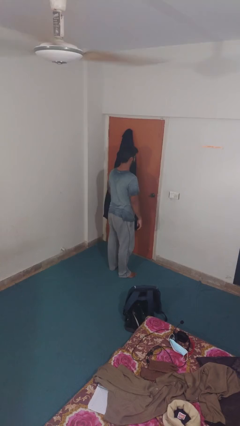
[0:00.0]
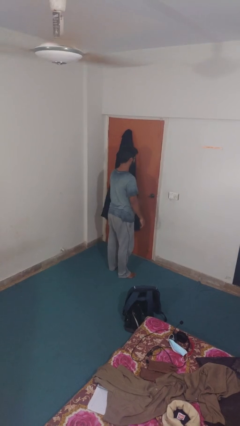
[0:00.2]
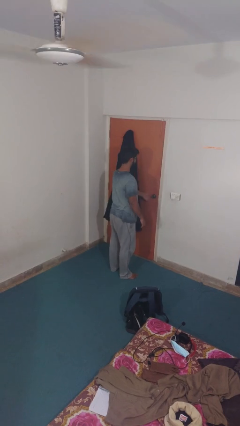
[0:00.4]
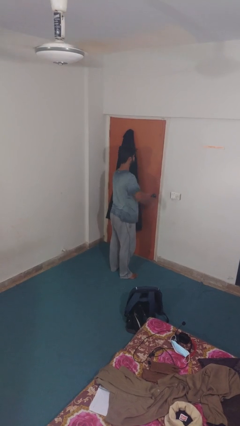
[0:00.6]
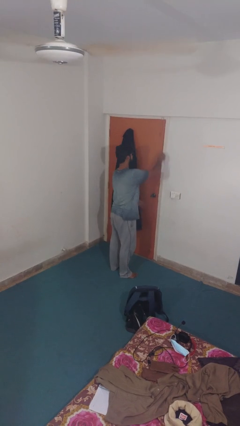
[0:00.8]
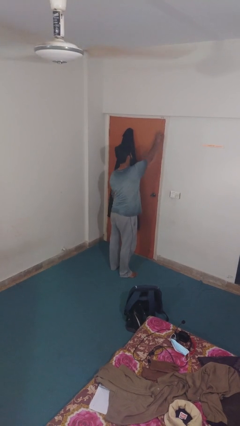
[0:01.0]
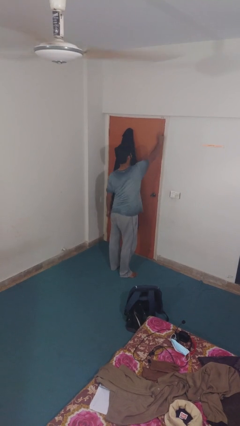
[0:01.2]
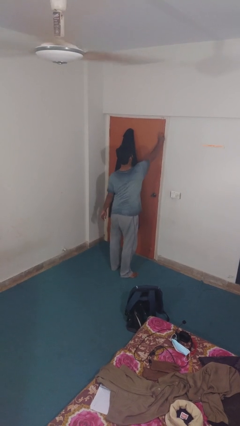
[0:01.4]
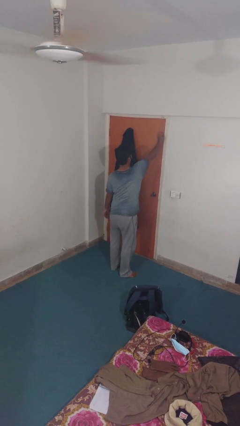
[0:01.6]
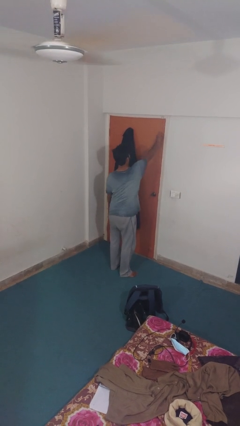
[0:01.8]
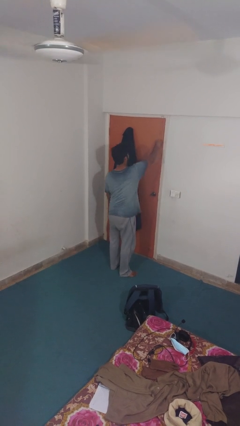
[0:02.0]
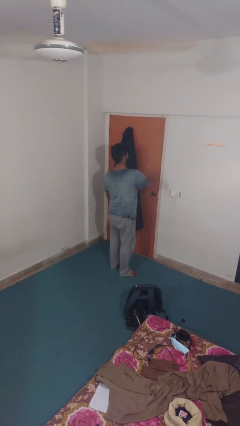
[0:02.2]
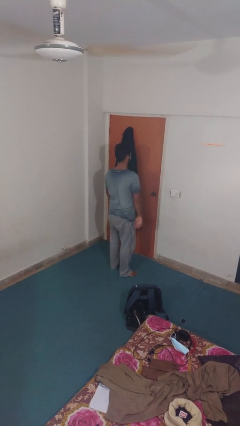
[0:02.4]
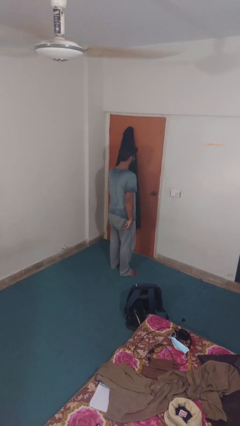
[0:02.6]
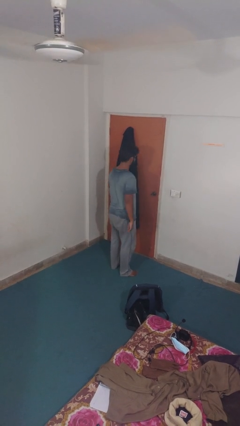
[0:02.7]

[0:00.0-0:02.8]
person unlocks door with keys

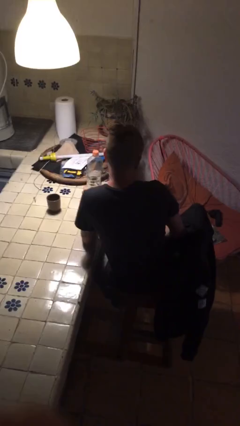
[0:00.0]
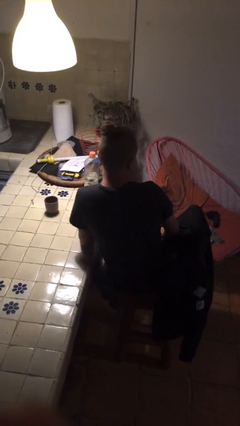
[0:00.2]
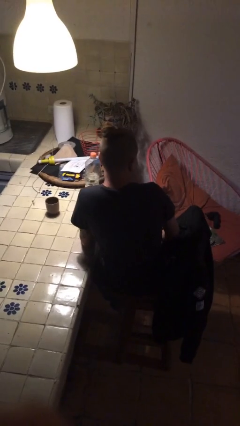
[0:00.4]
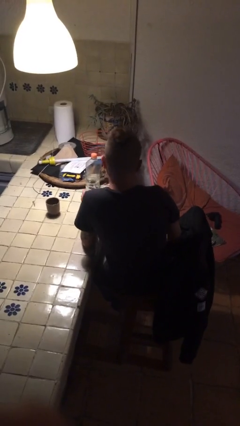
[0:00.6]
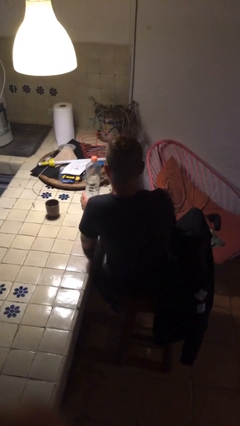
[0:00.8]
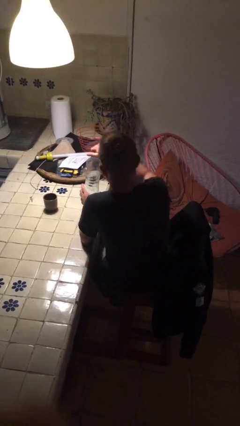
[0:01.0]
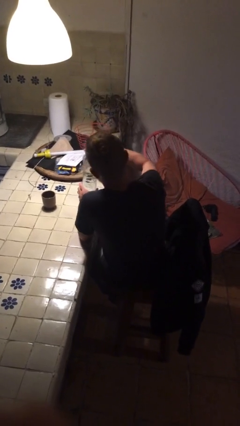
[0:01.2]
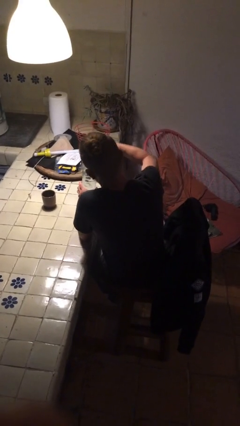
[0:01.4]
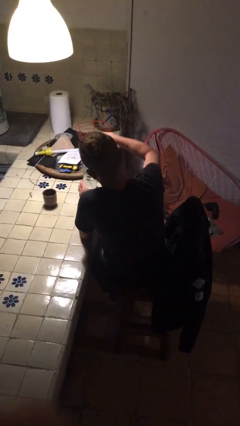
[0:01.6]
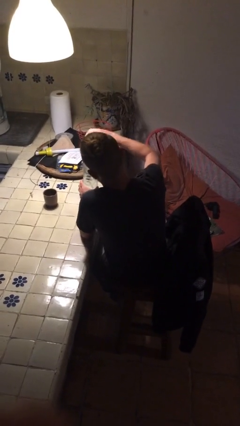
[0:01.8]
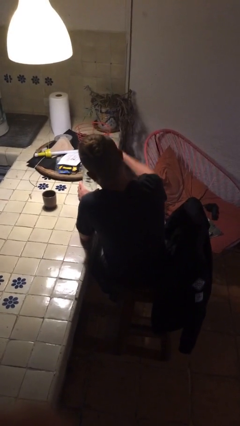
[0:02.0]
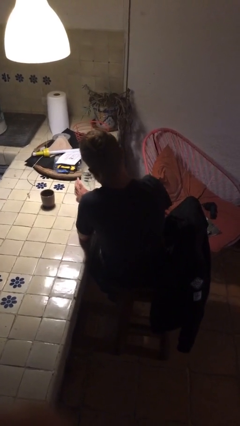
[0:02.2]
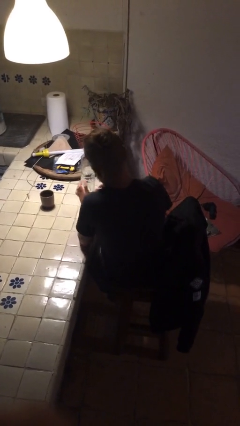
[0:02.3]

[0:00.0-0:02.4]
person unscrews lid from bottle

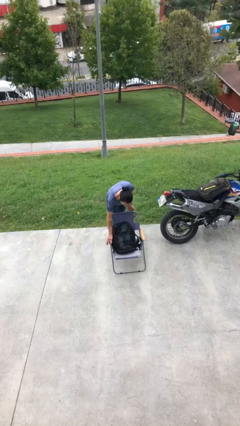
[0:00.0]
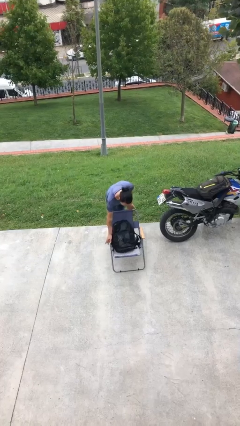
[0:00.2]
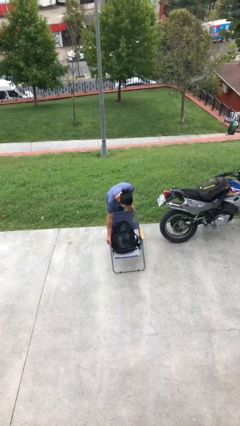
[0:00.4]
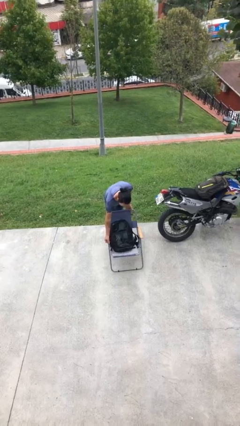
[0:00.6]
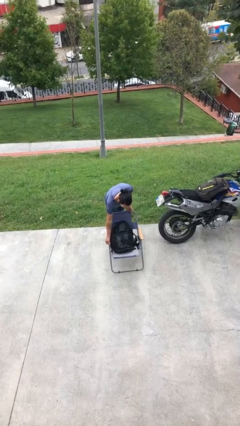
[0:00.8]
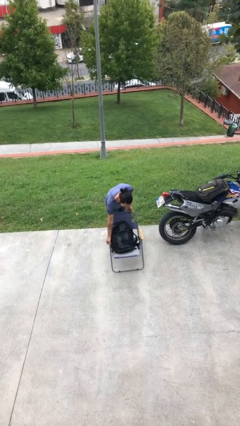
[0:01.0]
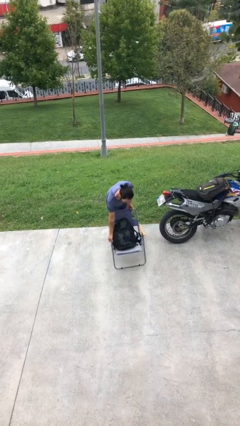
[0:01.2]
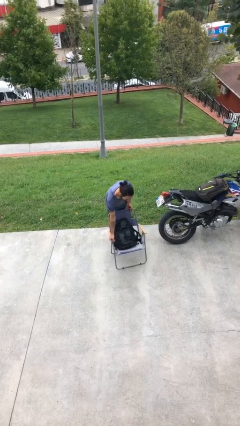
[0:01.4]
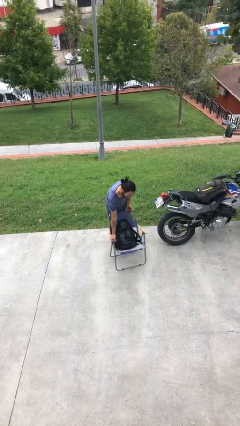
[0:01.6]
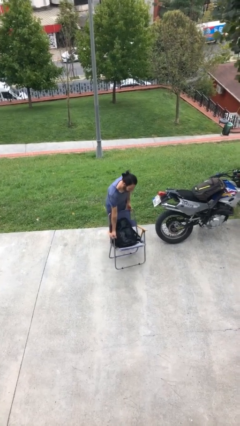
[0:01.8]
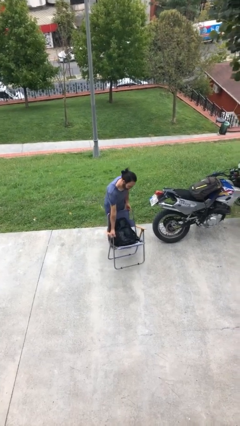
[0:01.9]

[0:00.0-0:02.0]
person picks up object from floor

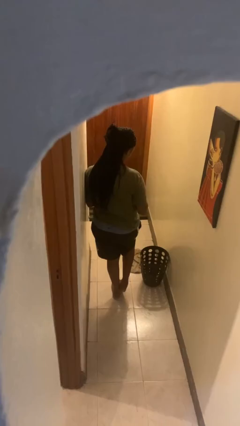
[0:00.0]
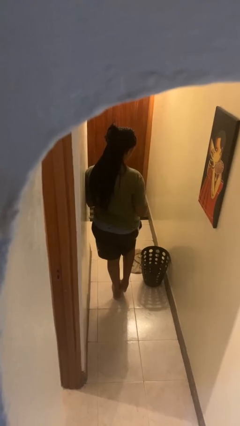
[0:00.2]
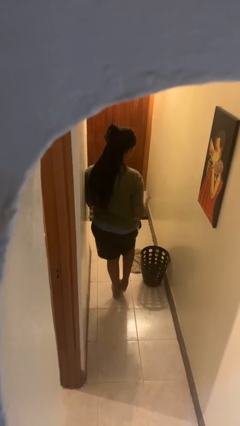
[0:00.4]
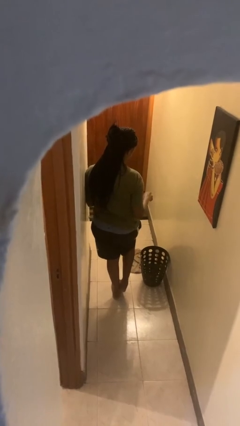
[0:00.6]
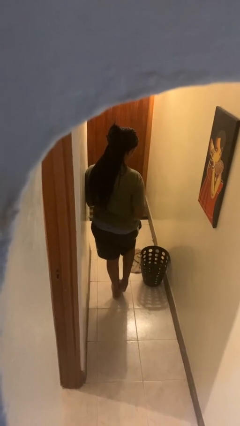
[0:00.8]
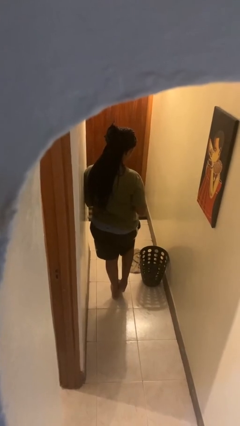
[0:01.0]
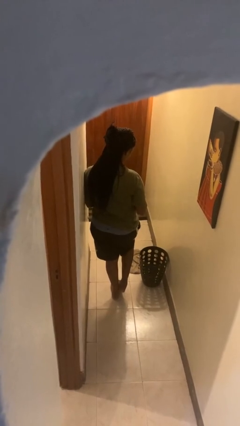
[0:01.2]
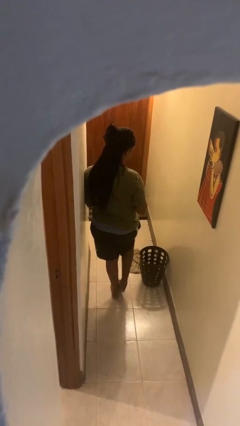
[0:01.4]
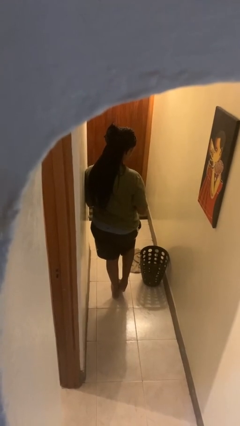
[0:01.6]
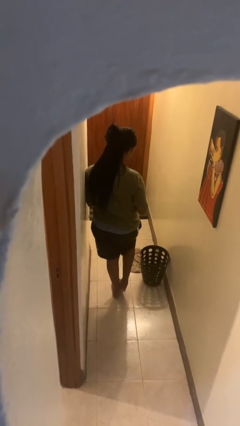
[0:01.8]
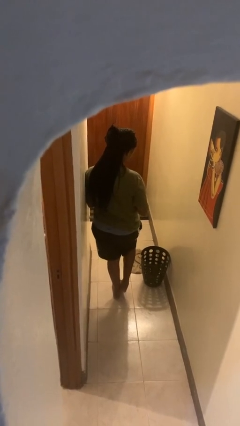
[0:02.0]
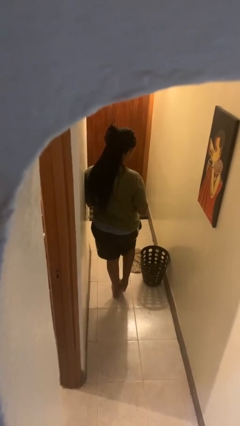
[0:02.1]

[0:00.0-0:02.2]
person discards trash

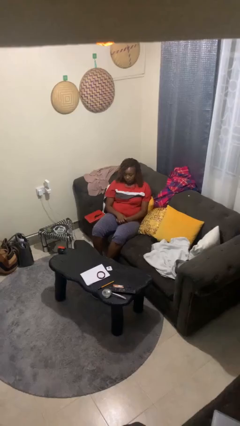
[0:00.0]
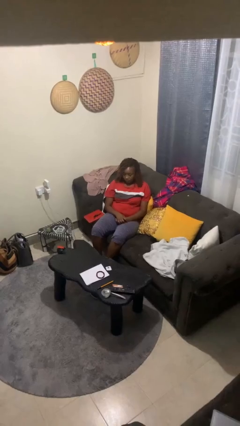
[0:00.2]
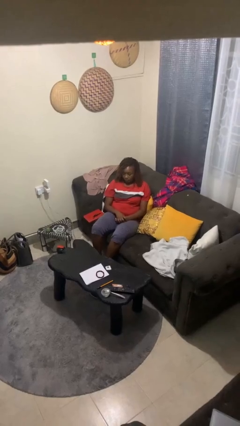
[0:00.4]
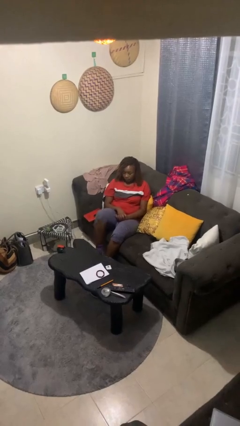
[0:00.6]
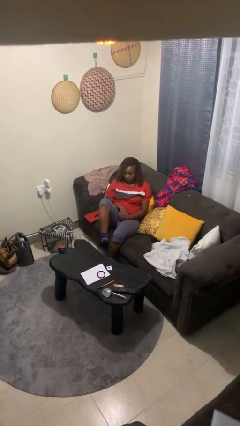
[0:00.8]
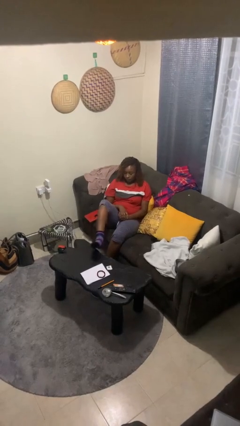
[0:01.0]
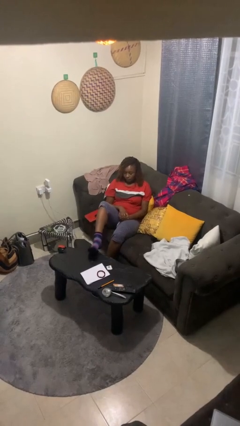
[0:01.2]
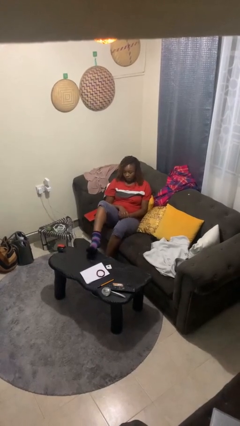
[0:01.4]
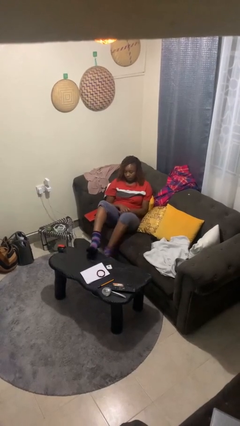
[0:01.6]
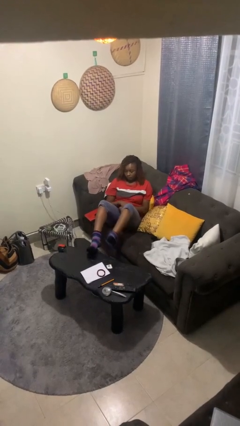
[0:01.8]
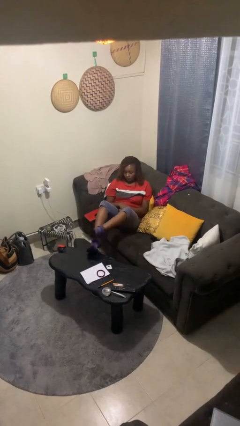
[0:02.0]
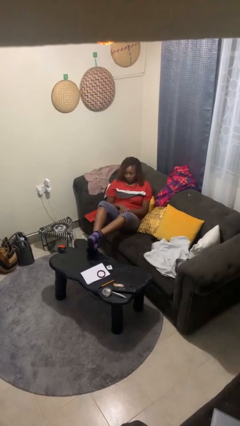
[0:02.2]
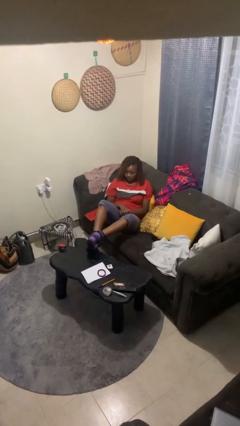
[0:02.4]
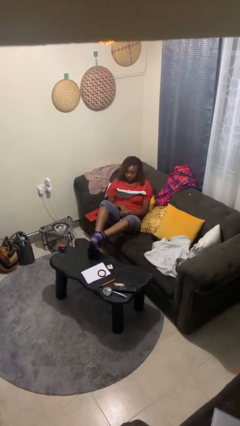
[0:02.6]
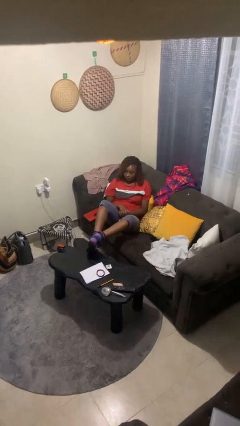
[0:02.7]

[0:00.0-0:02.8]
person puts feet up

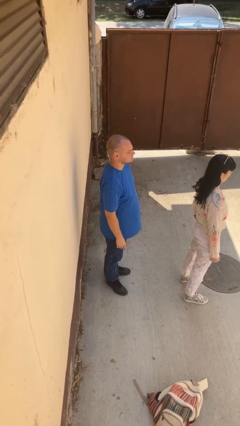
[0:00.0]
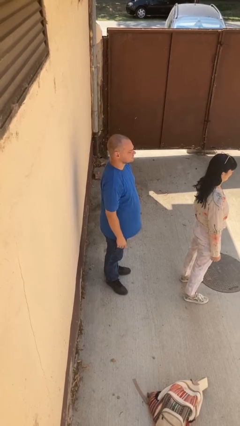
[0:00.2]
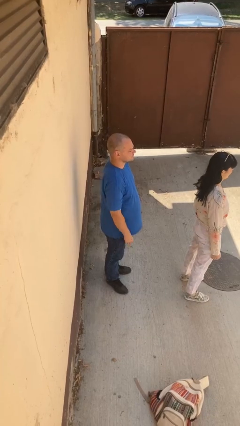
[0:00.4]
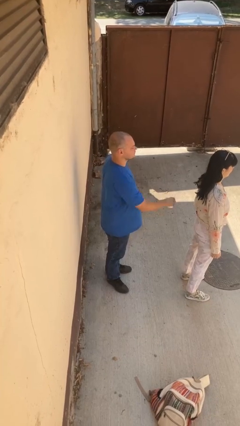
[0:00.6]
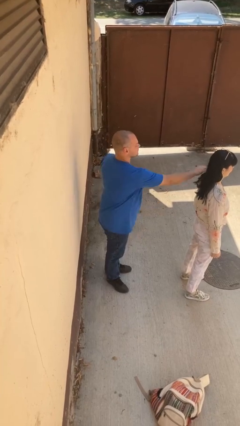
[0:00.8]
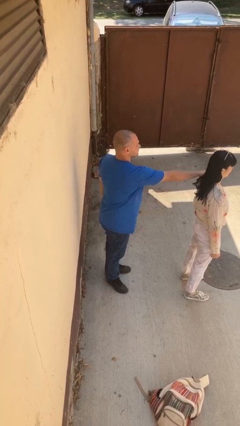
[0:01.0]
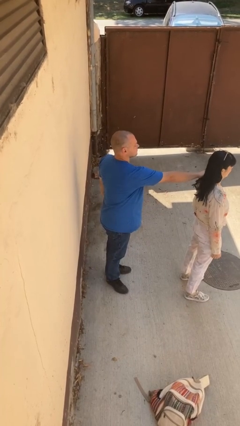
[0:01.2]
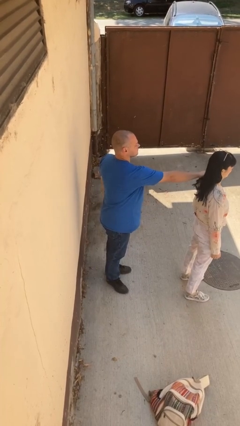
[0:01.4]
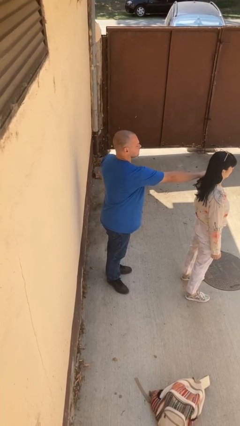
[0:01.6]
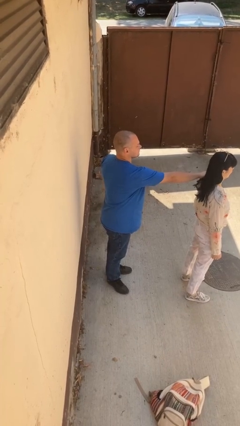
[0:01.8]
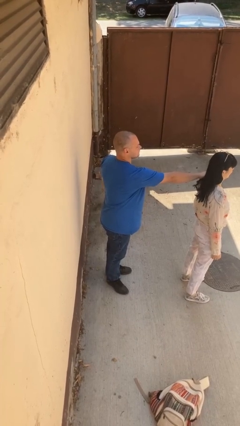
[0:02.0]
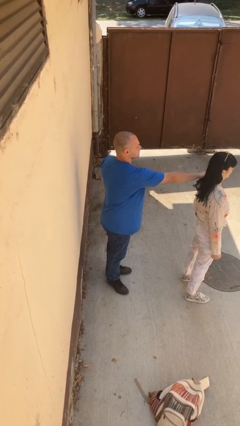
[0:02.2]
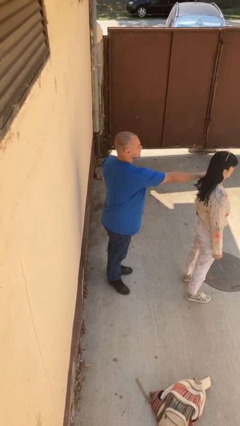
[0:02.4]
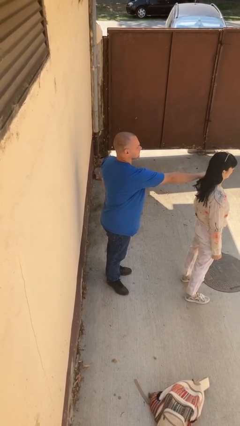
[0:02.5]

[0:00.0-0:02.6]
person grabs person by shoulder

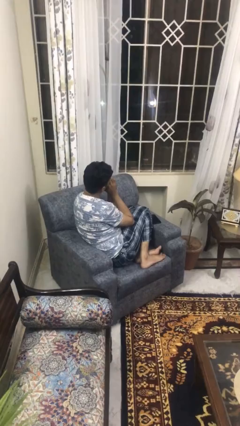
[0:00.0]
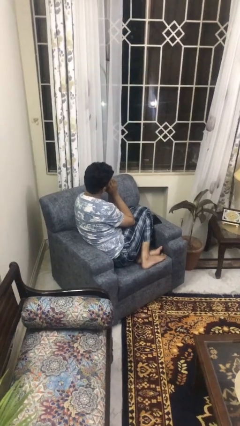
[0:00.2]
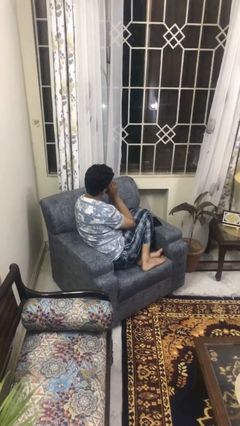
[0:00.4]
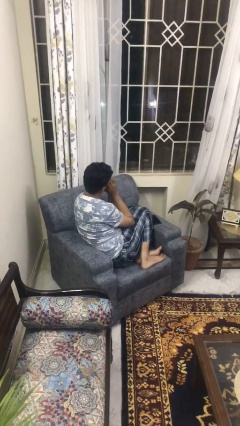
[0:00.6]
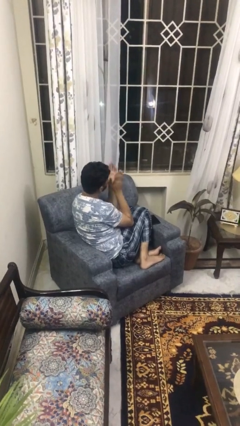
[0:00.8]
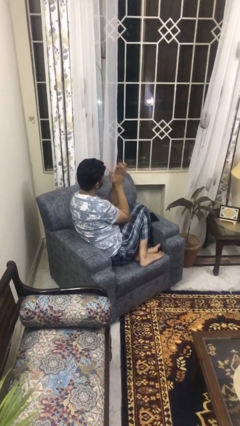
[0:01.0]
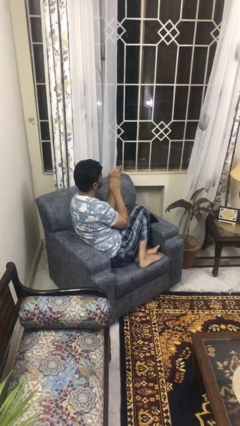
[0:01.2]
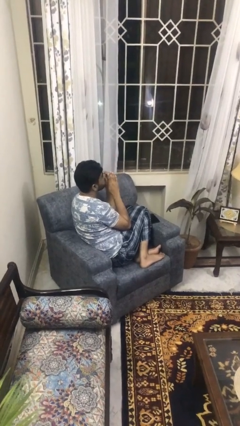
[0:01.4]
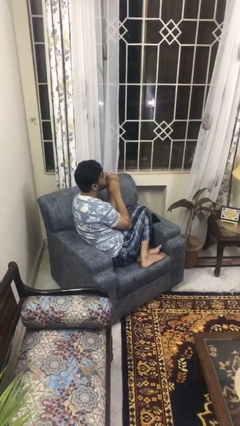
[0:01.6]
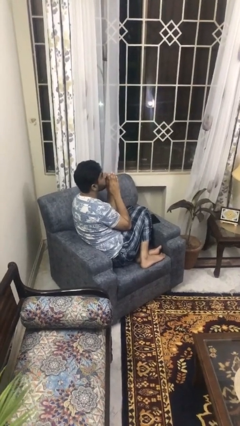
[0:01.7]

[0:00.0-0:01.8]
person swats bug

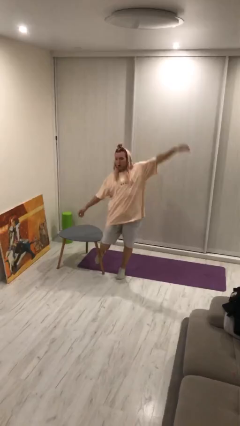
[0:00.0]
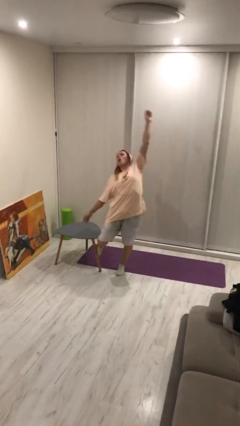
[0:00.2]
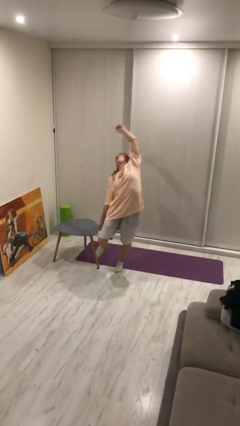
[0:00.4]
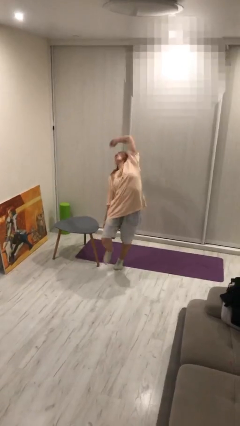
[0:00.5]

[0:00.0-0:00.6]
person trips on object on floor
